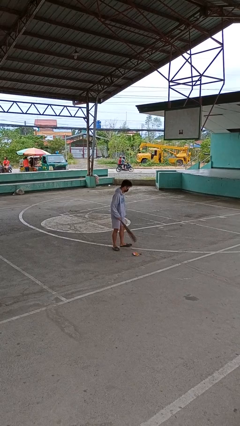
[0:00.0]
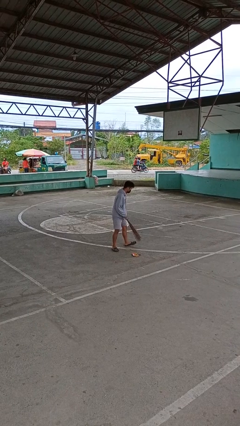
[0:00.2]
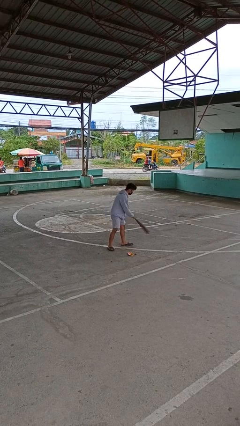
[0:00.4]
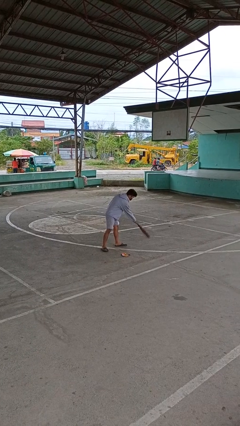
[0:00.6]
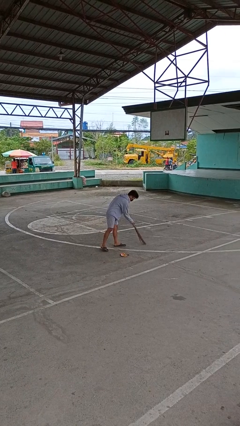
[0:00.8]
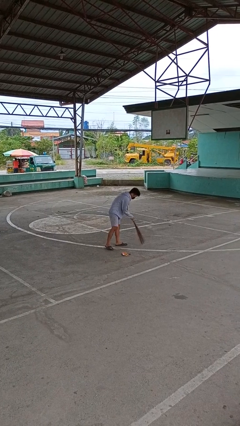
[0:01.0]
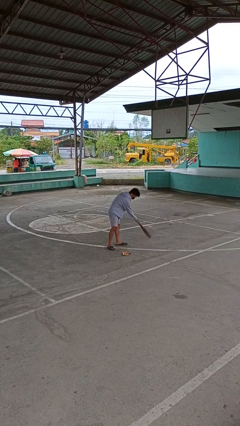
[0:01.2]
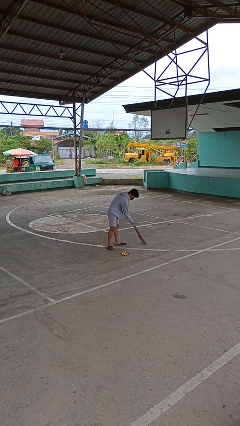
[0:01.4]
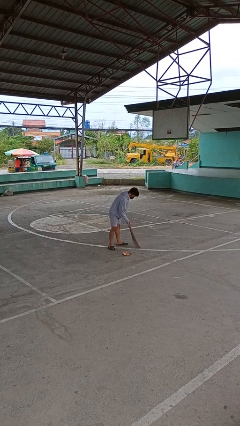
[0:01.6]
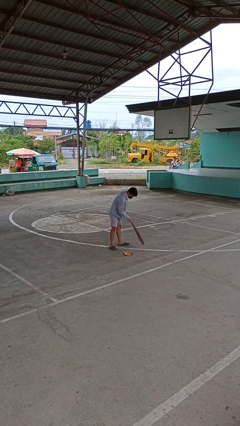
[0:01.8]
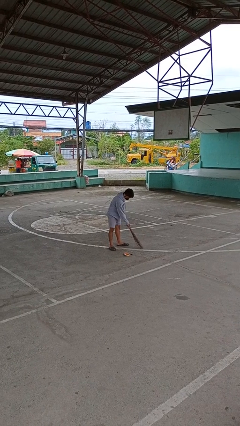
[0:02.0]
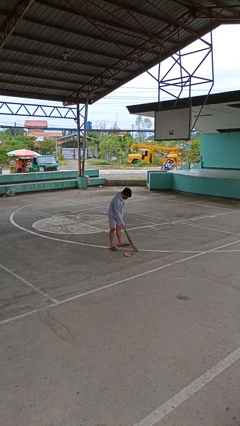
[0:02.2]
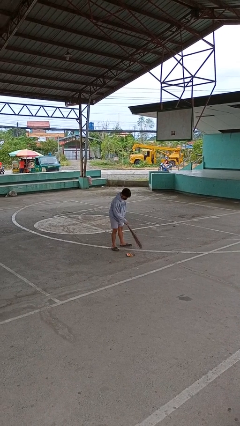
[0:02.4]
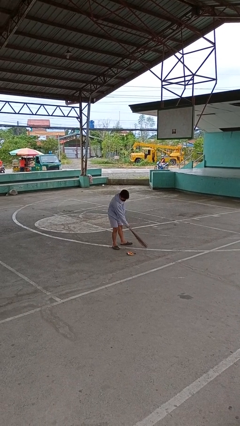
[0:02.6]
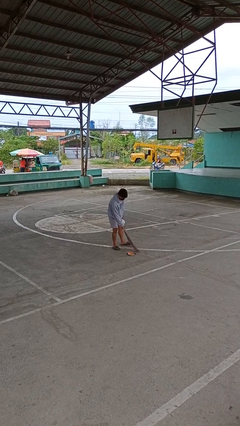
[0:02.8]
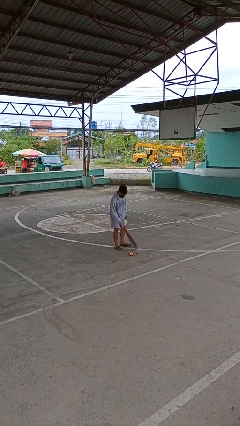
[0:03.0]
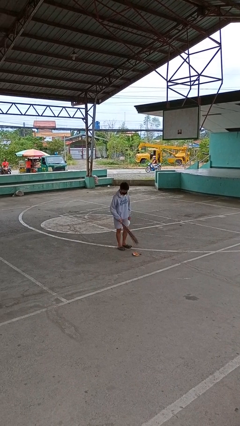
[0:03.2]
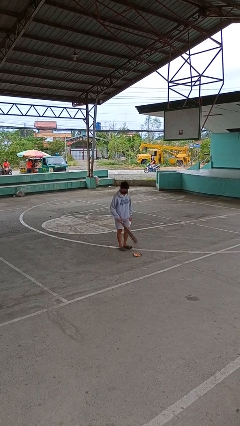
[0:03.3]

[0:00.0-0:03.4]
person sweeps floor

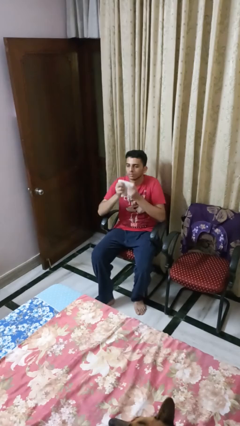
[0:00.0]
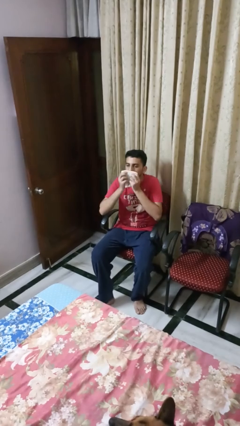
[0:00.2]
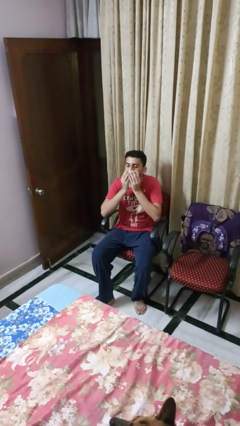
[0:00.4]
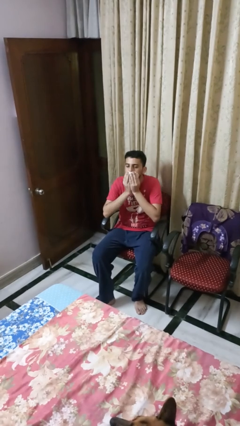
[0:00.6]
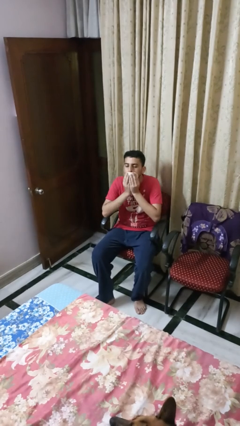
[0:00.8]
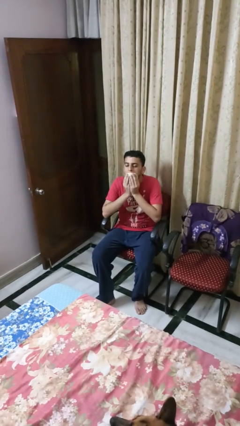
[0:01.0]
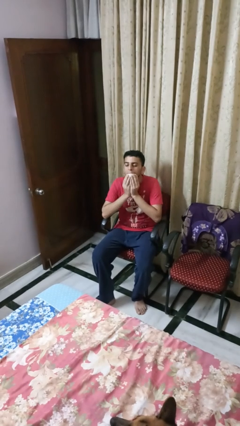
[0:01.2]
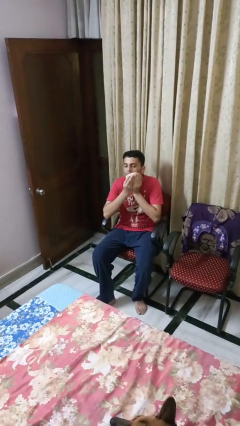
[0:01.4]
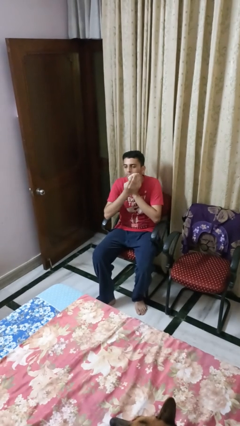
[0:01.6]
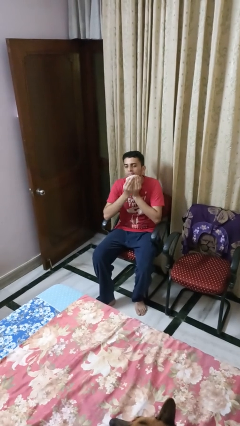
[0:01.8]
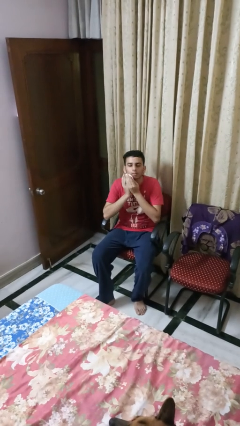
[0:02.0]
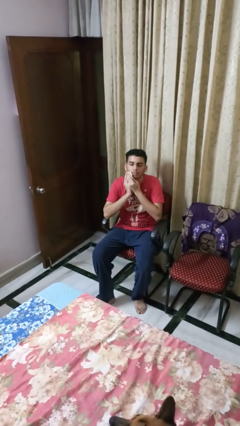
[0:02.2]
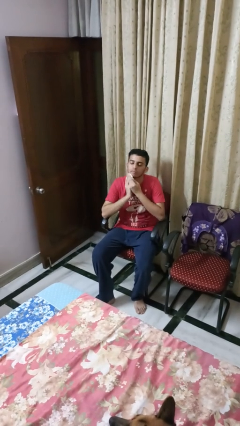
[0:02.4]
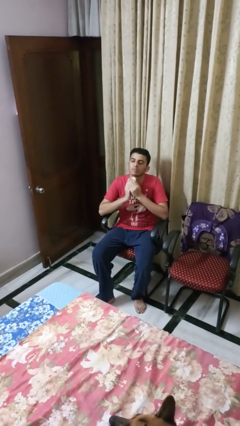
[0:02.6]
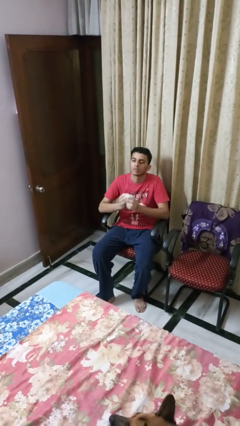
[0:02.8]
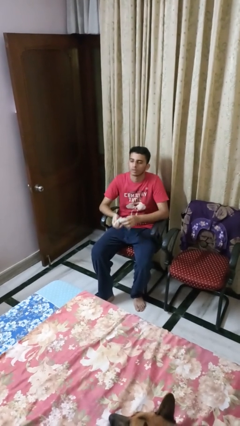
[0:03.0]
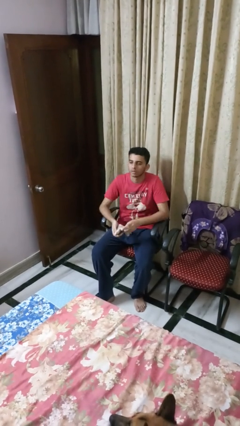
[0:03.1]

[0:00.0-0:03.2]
person wipes mouth with napkin

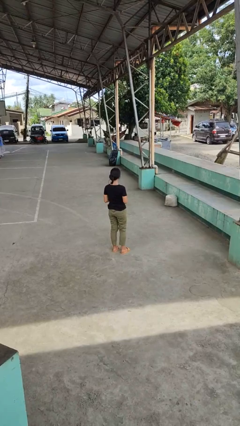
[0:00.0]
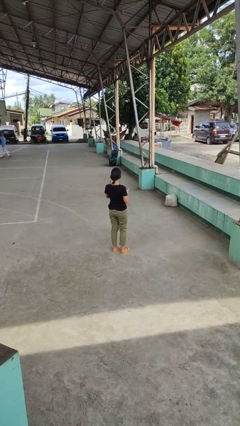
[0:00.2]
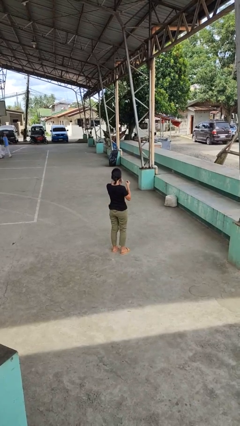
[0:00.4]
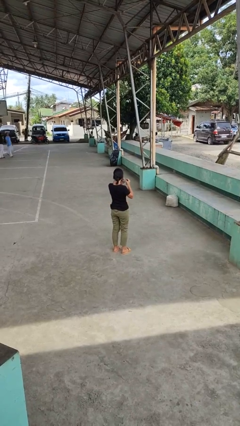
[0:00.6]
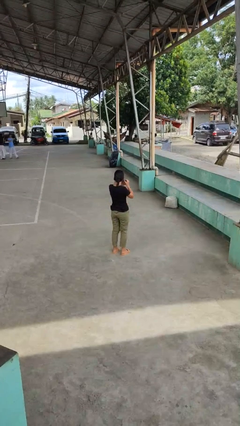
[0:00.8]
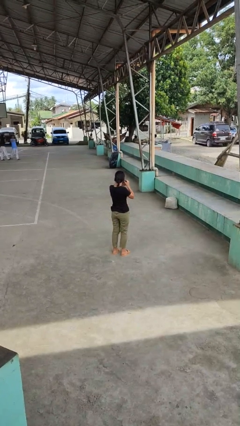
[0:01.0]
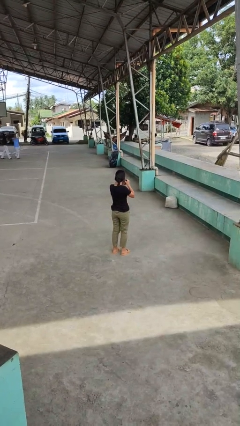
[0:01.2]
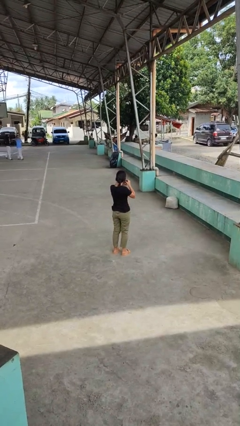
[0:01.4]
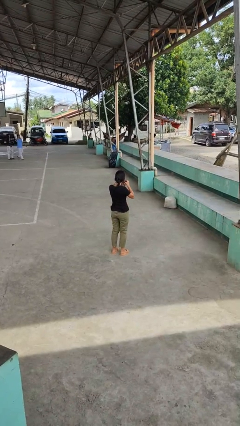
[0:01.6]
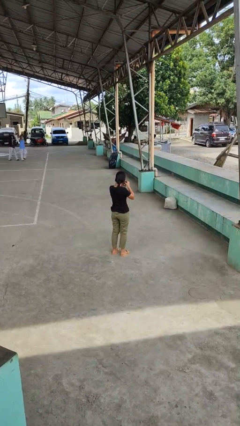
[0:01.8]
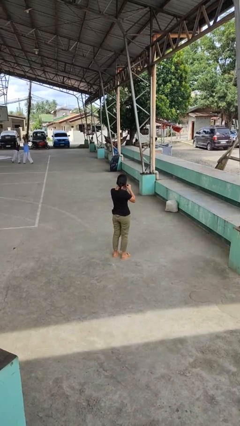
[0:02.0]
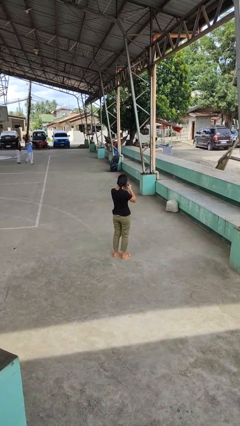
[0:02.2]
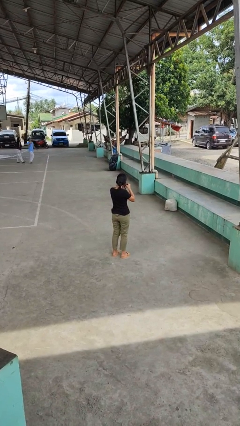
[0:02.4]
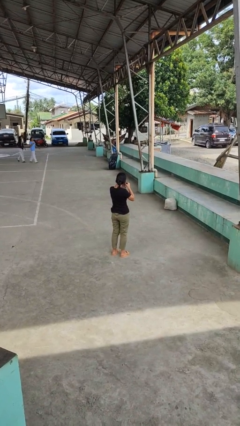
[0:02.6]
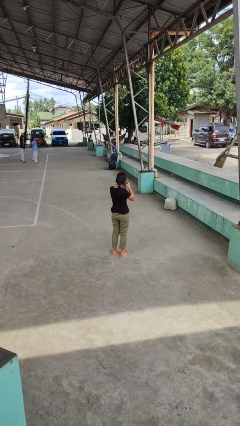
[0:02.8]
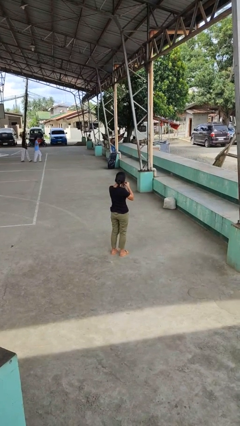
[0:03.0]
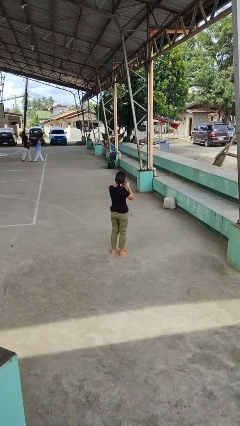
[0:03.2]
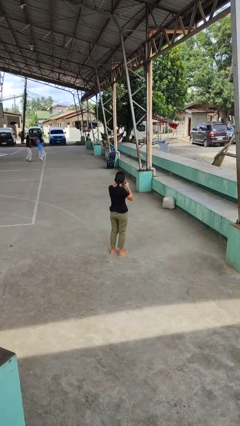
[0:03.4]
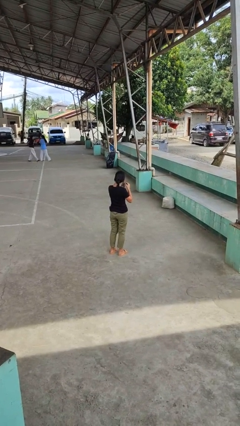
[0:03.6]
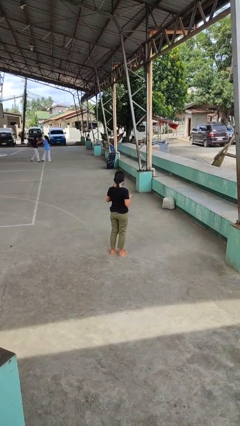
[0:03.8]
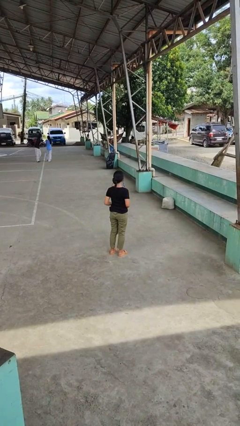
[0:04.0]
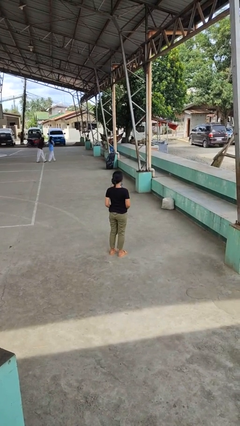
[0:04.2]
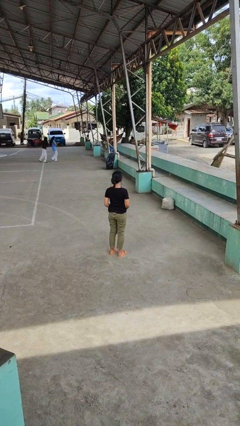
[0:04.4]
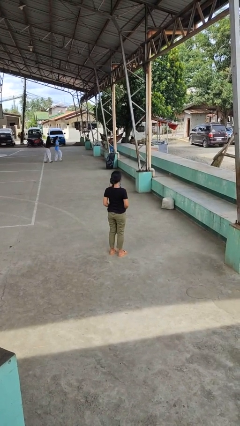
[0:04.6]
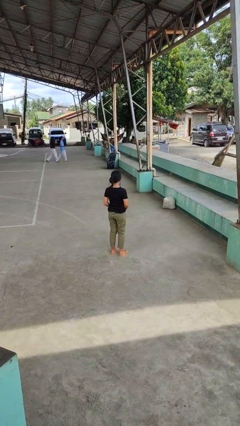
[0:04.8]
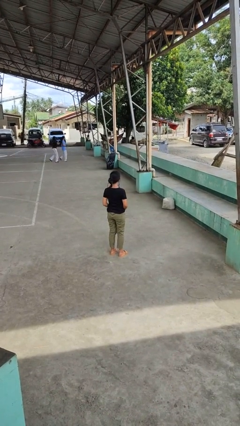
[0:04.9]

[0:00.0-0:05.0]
person puts on earrings

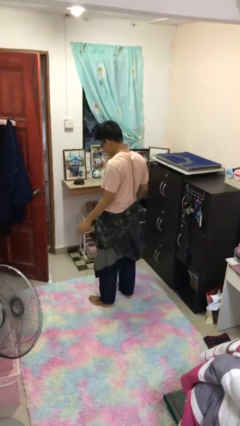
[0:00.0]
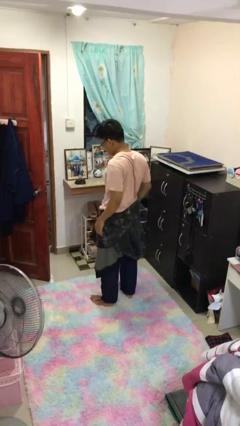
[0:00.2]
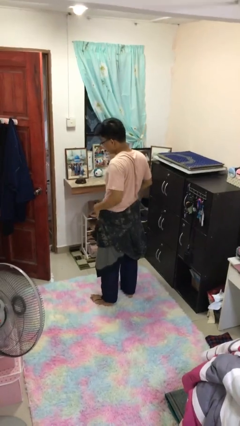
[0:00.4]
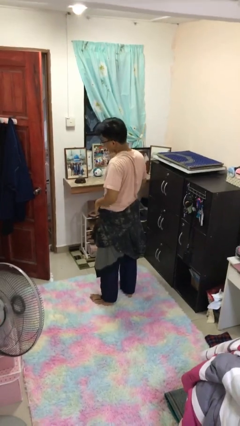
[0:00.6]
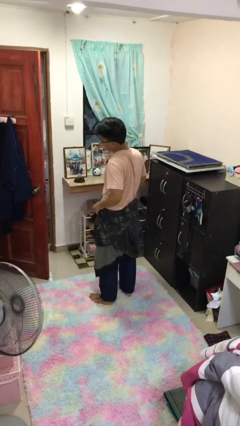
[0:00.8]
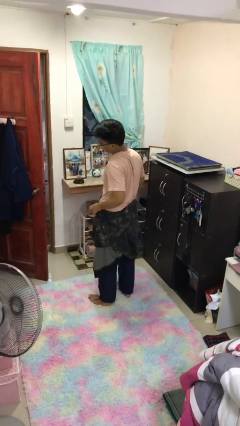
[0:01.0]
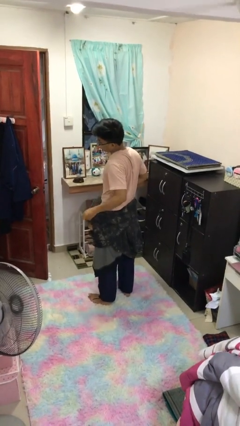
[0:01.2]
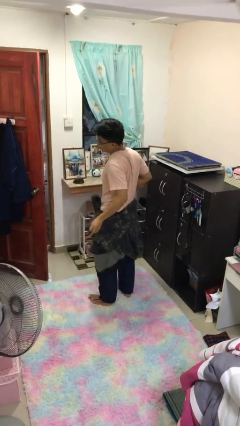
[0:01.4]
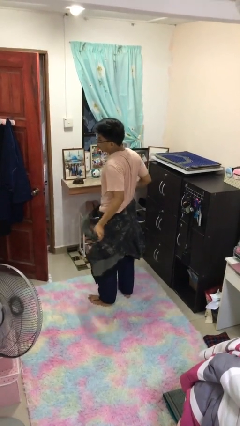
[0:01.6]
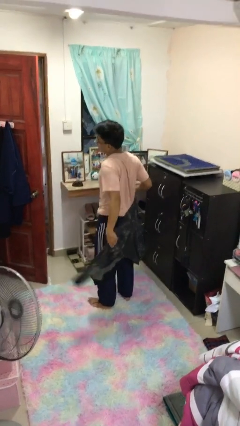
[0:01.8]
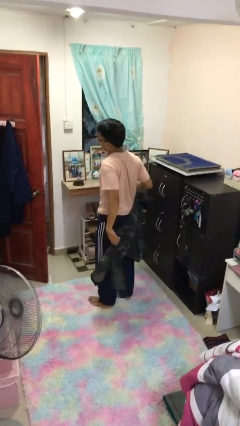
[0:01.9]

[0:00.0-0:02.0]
person unties jacket around waist

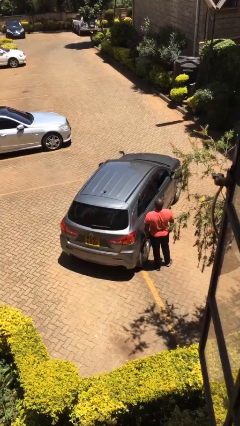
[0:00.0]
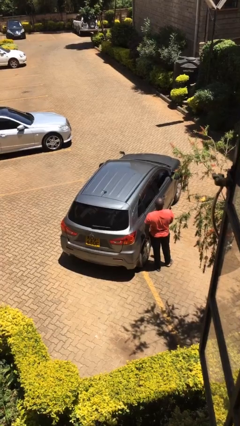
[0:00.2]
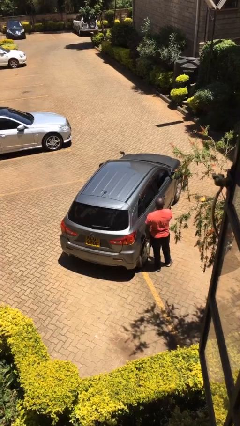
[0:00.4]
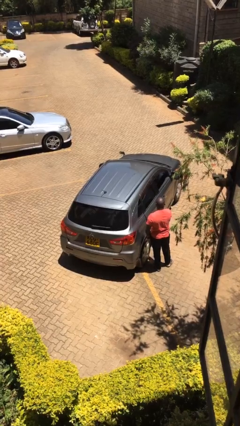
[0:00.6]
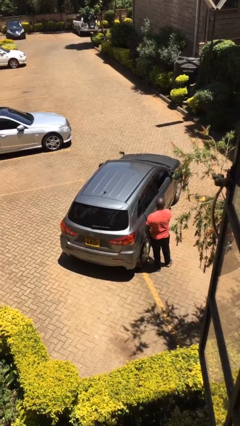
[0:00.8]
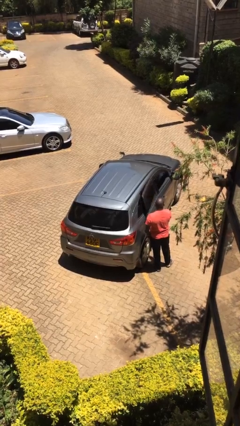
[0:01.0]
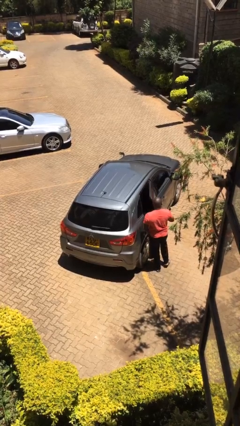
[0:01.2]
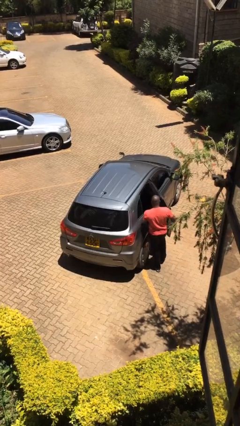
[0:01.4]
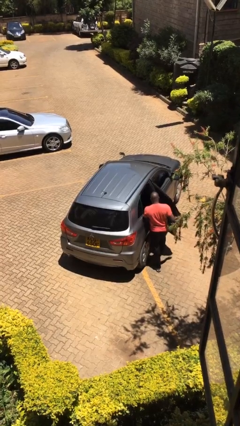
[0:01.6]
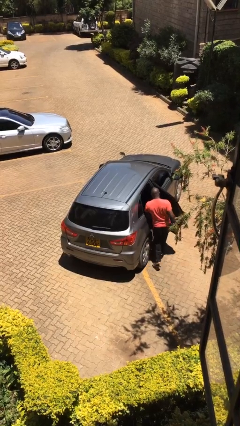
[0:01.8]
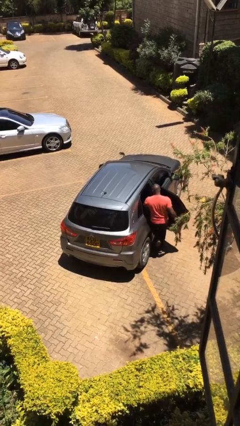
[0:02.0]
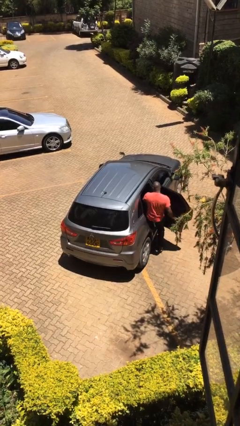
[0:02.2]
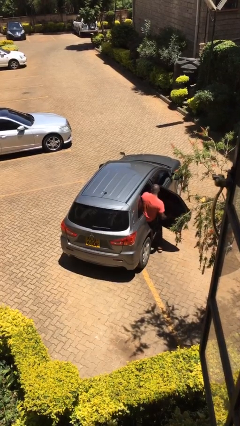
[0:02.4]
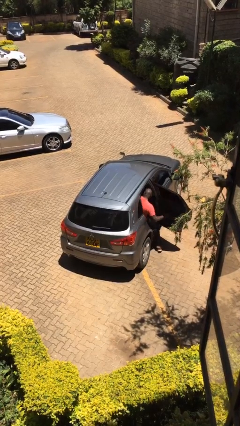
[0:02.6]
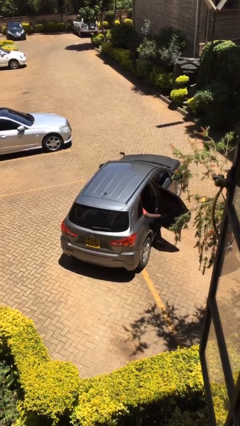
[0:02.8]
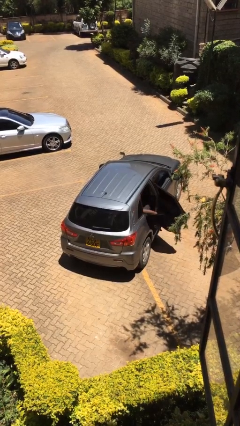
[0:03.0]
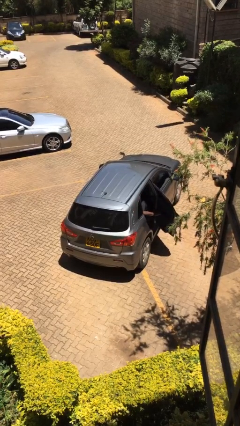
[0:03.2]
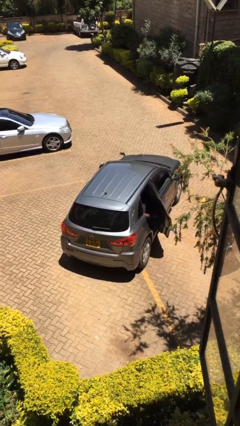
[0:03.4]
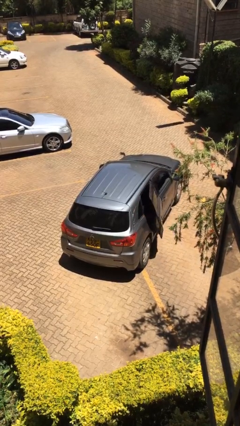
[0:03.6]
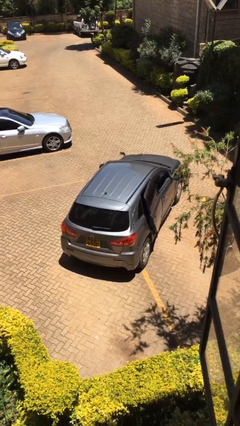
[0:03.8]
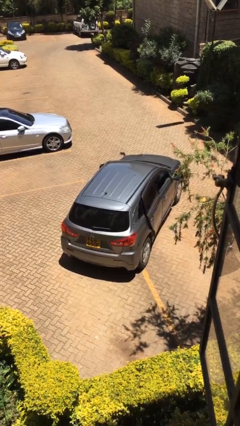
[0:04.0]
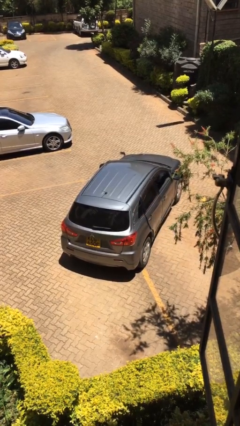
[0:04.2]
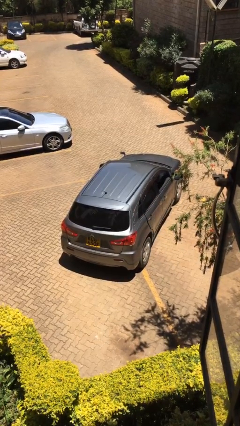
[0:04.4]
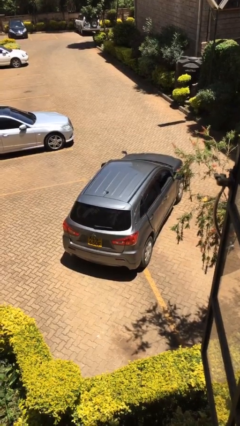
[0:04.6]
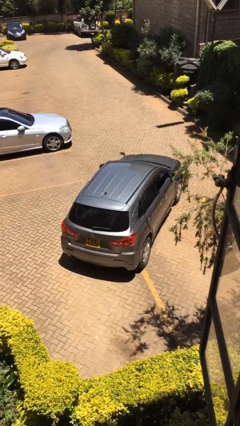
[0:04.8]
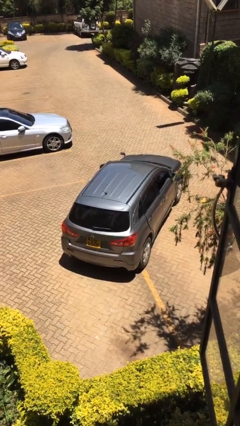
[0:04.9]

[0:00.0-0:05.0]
car picks up person
